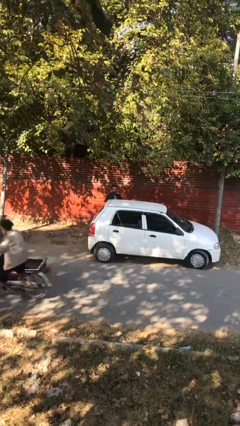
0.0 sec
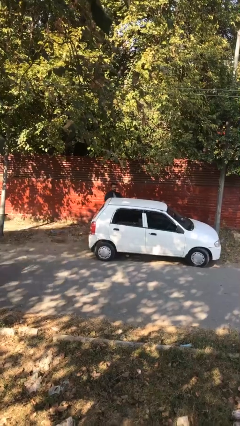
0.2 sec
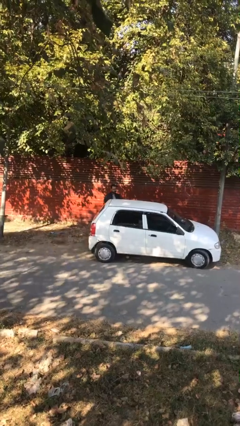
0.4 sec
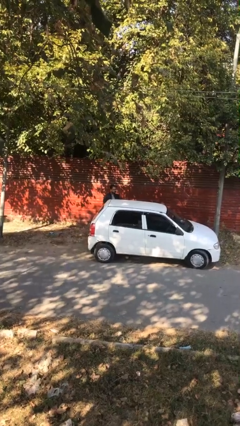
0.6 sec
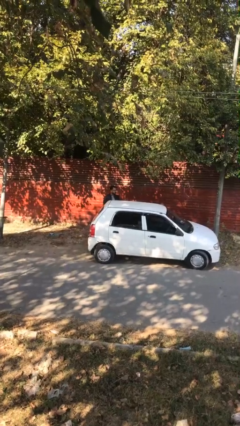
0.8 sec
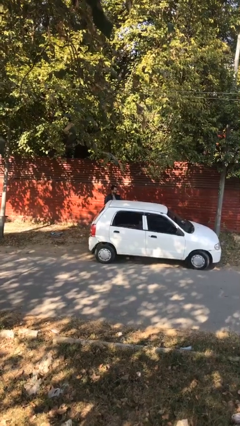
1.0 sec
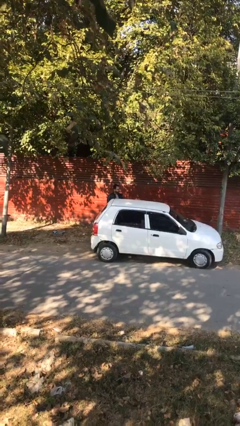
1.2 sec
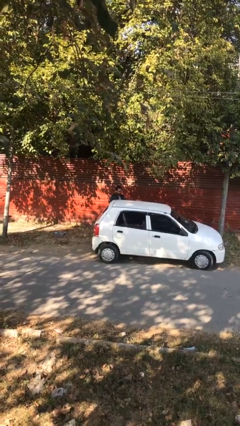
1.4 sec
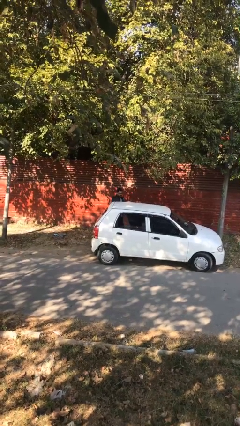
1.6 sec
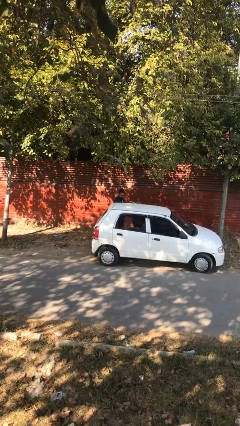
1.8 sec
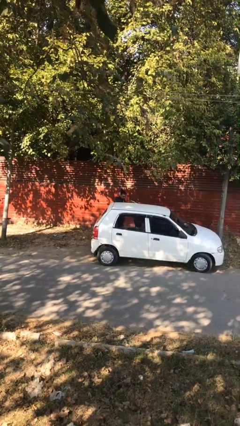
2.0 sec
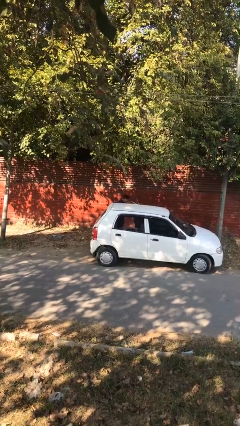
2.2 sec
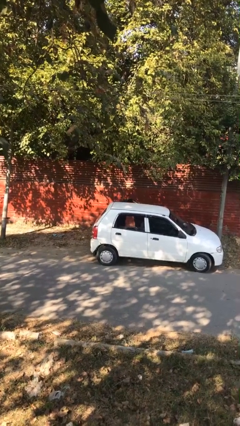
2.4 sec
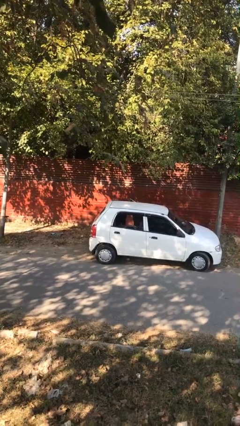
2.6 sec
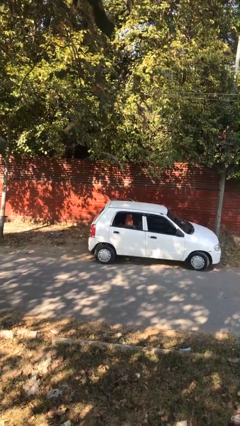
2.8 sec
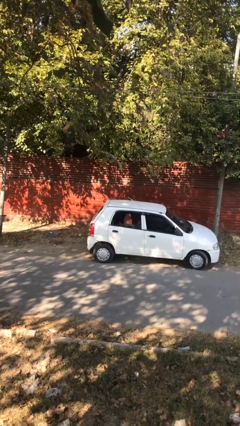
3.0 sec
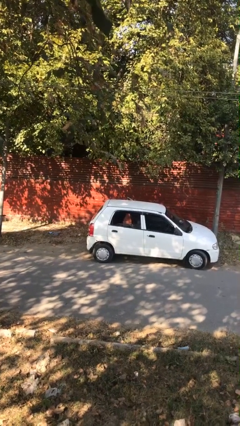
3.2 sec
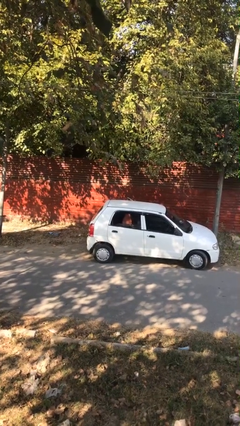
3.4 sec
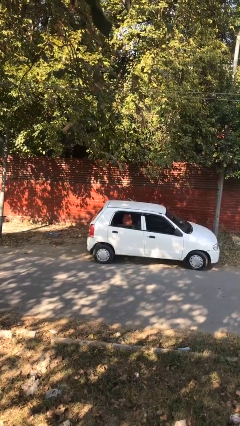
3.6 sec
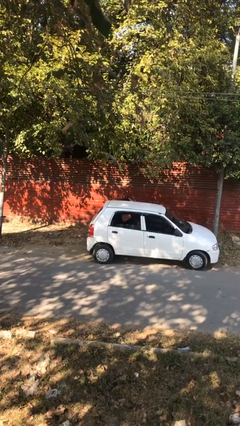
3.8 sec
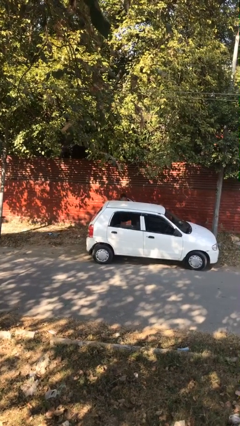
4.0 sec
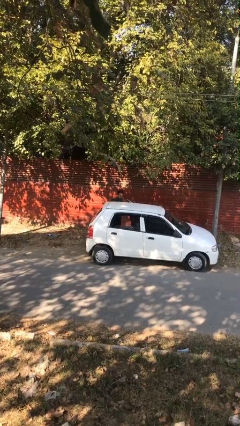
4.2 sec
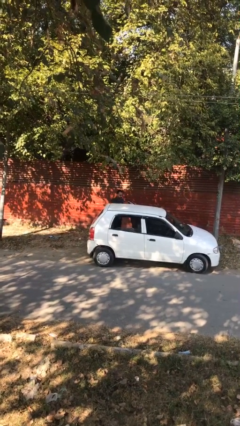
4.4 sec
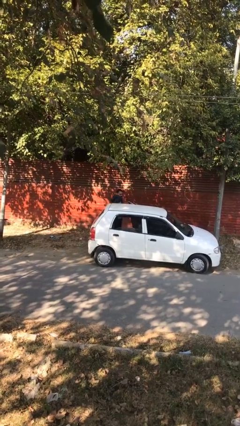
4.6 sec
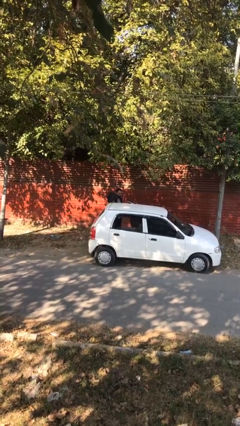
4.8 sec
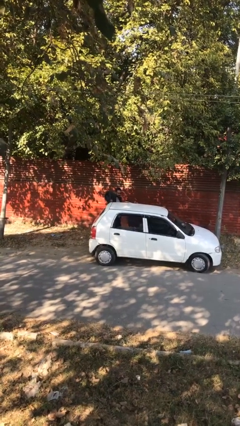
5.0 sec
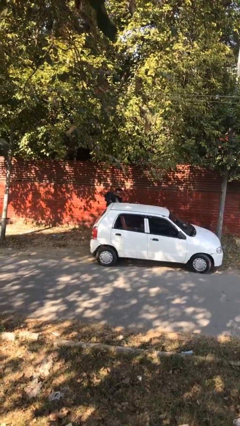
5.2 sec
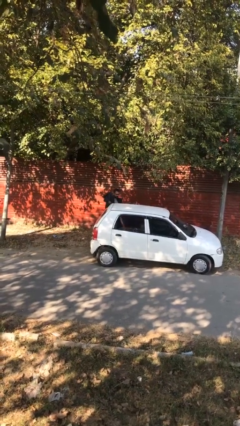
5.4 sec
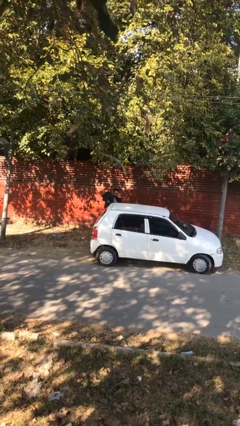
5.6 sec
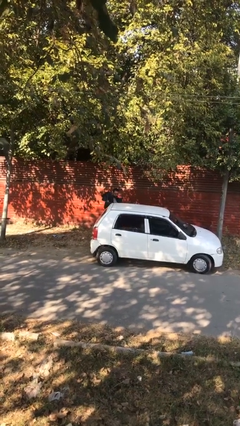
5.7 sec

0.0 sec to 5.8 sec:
person unloads car

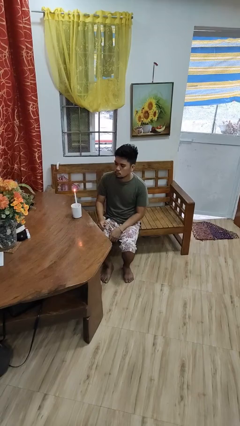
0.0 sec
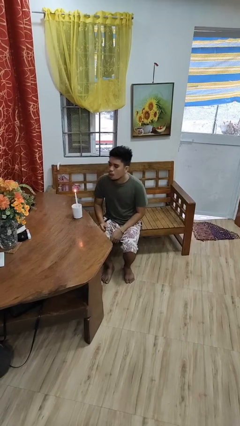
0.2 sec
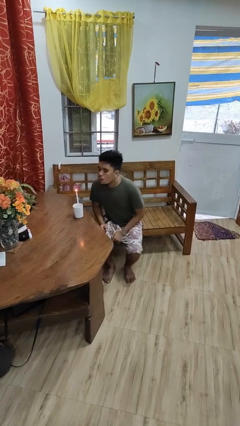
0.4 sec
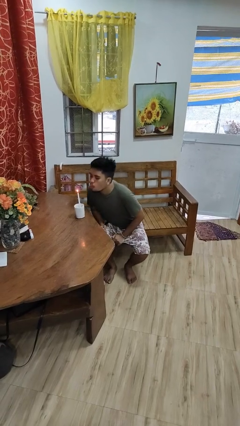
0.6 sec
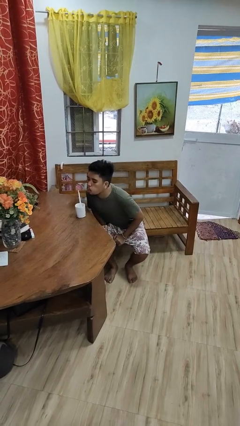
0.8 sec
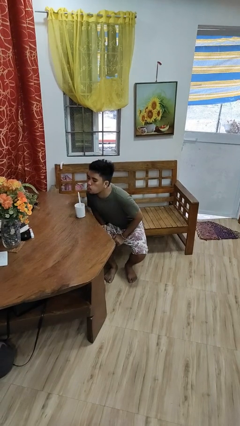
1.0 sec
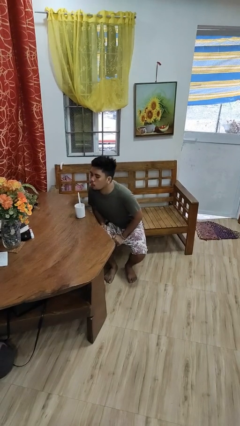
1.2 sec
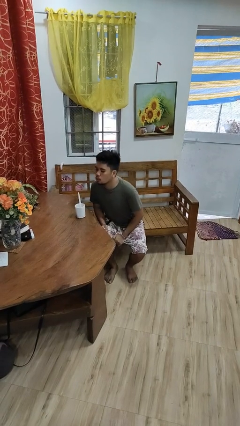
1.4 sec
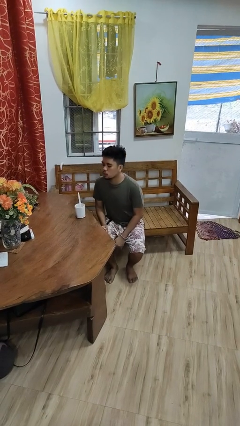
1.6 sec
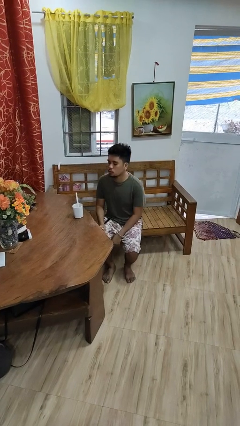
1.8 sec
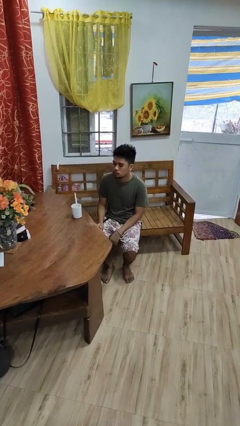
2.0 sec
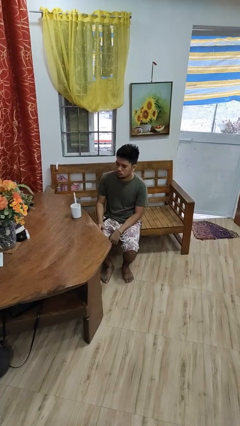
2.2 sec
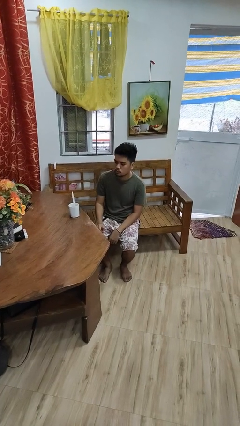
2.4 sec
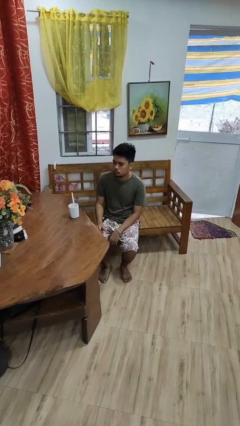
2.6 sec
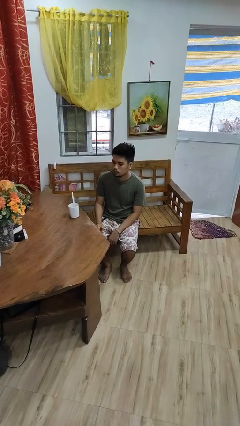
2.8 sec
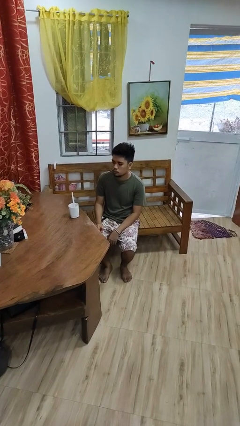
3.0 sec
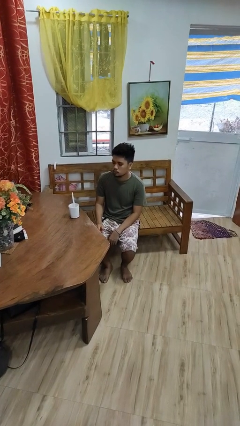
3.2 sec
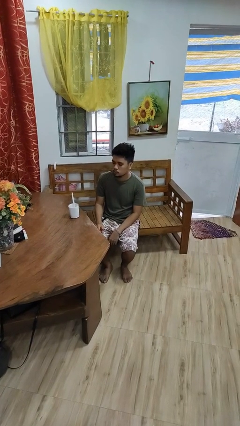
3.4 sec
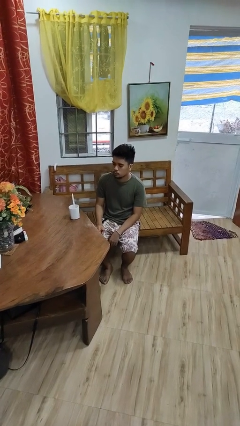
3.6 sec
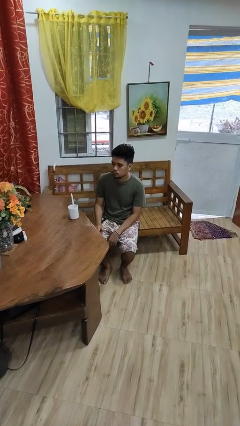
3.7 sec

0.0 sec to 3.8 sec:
person extinguishes candle

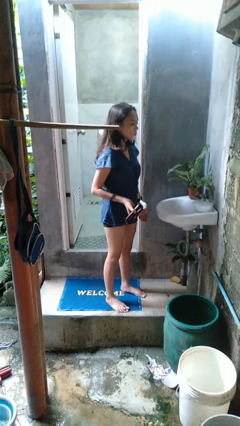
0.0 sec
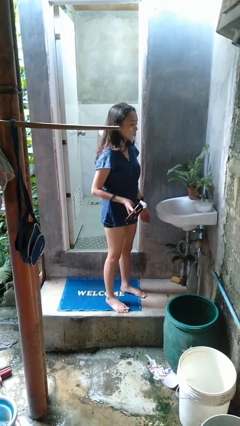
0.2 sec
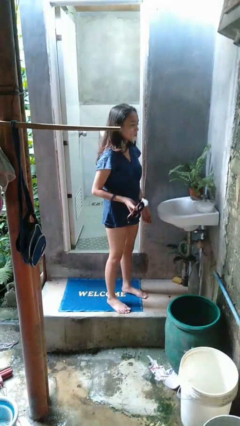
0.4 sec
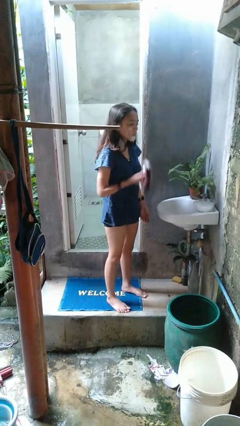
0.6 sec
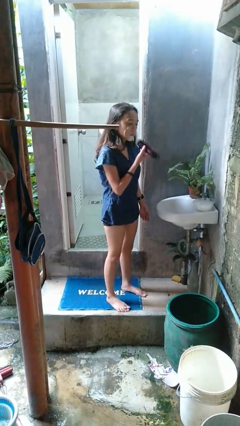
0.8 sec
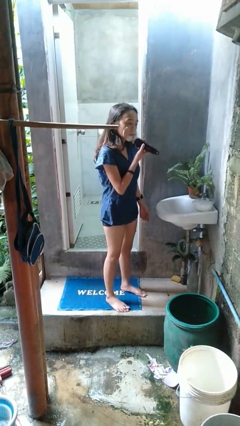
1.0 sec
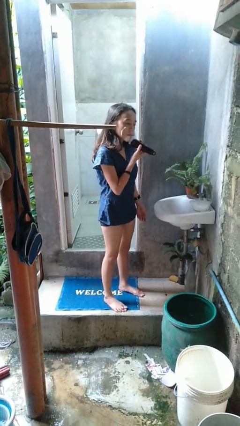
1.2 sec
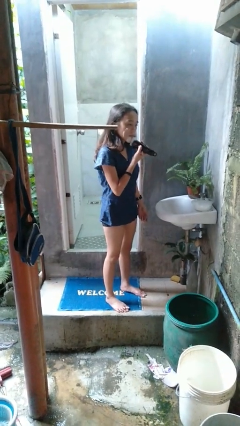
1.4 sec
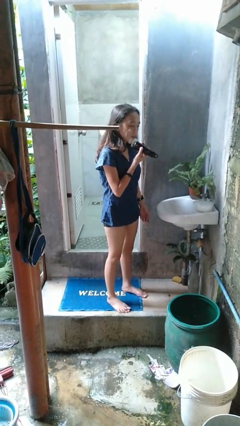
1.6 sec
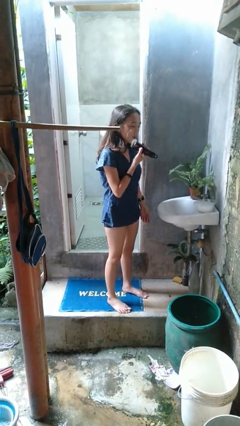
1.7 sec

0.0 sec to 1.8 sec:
person shaves face

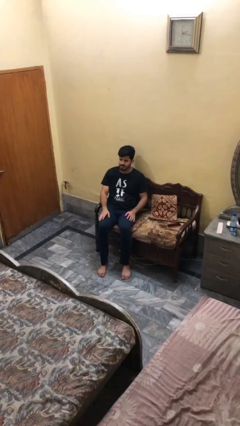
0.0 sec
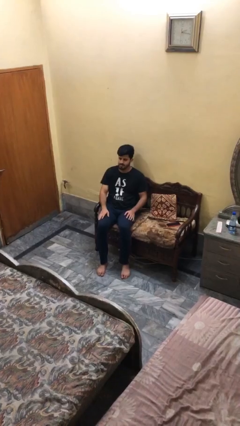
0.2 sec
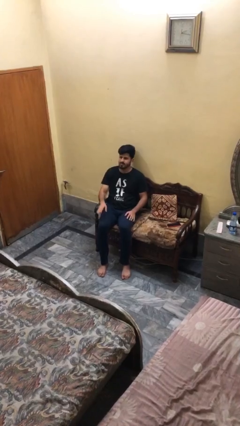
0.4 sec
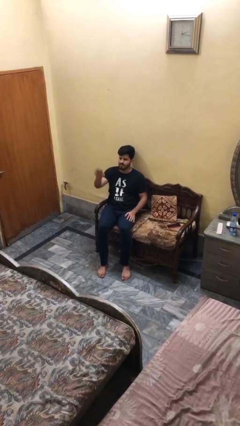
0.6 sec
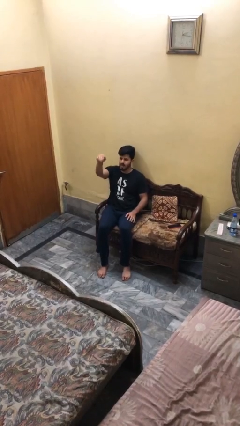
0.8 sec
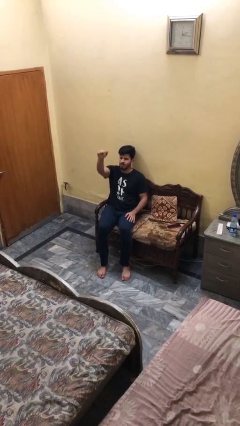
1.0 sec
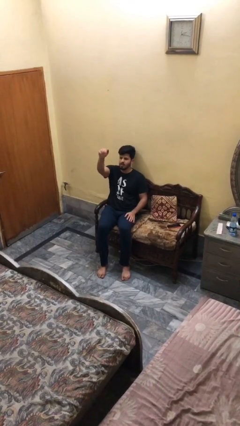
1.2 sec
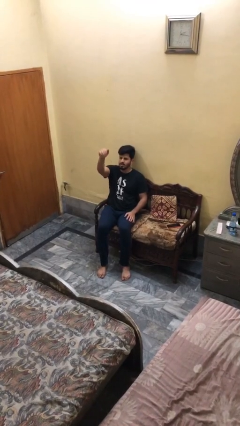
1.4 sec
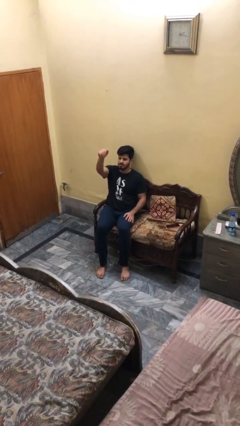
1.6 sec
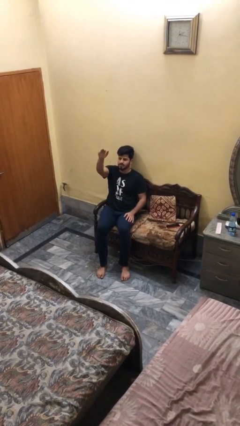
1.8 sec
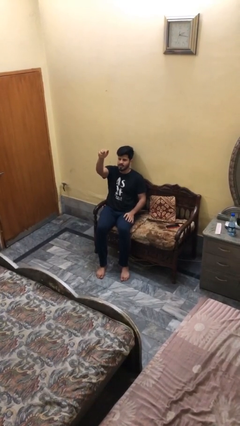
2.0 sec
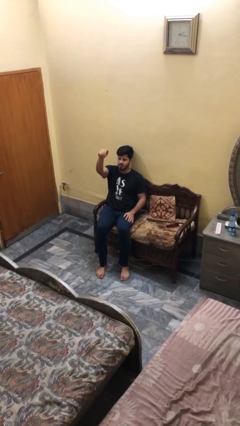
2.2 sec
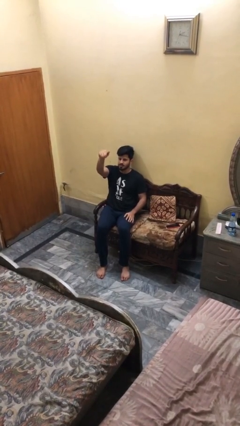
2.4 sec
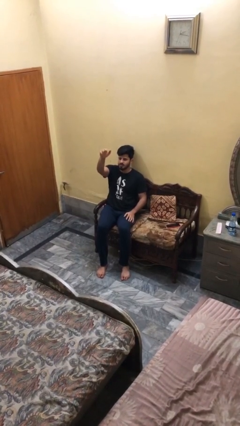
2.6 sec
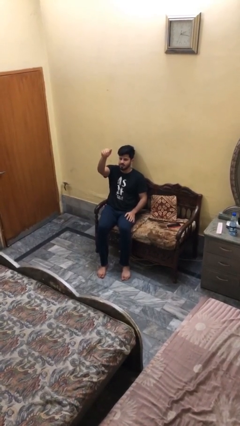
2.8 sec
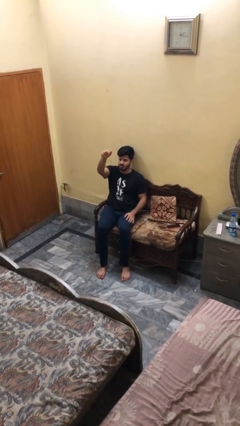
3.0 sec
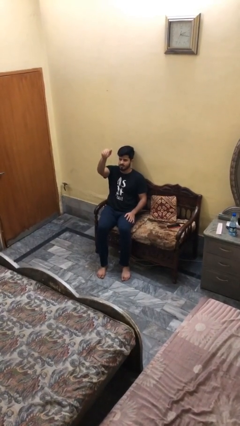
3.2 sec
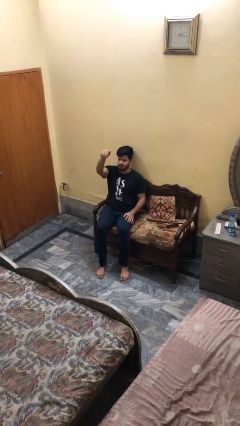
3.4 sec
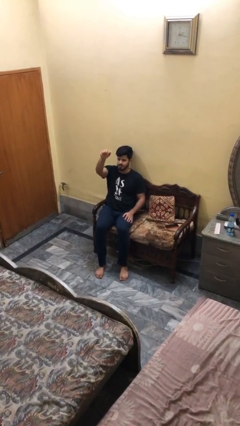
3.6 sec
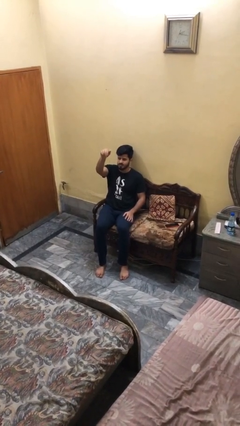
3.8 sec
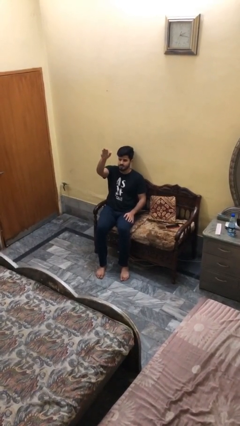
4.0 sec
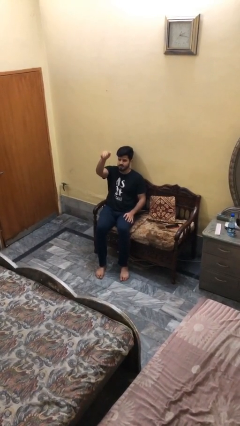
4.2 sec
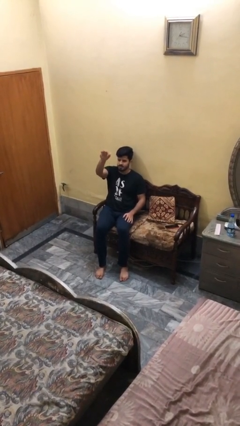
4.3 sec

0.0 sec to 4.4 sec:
person gestures come here

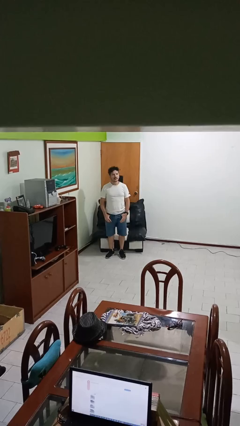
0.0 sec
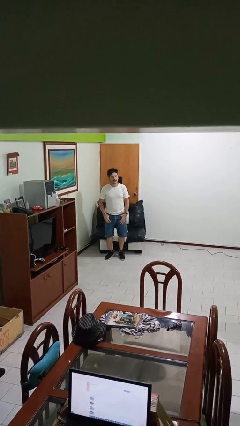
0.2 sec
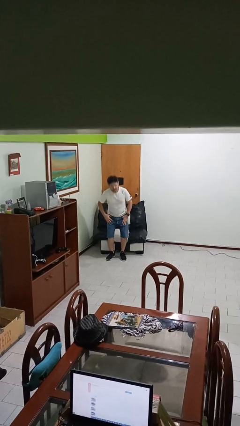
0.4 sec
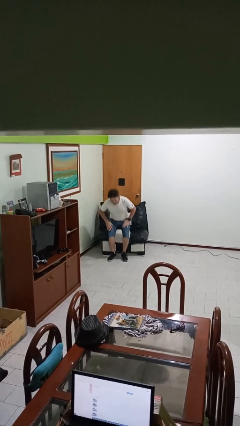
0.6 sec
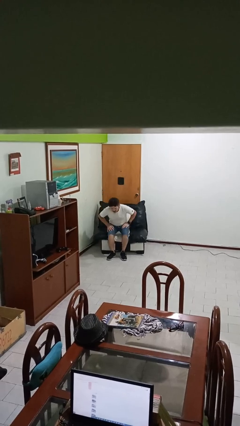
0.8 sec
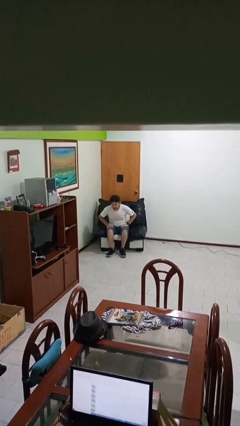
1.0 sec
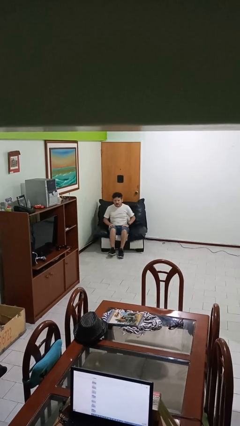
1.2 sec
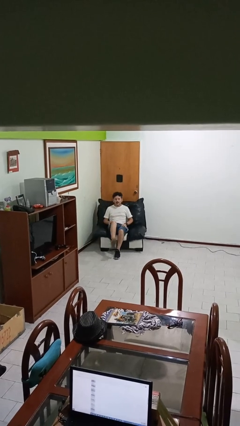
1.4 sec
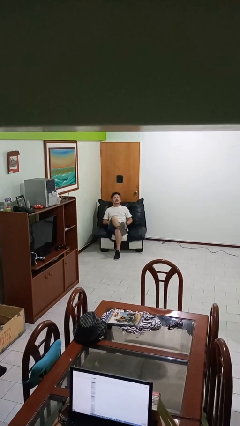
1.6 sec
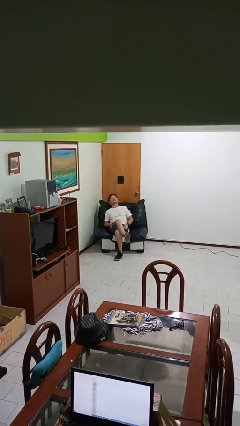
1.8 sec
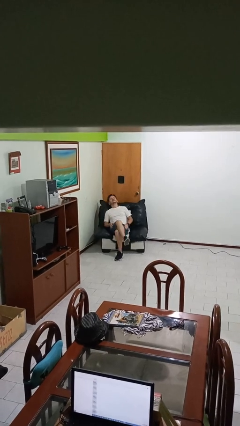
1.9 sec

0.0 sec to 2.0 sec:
person lies down on couch

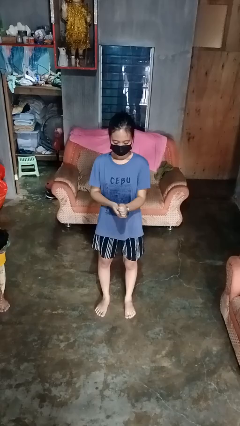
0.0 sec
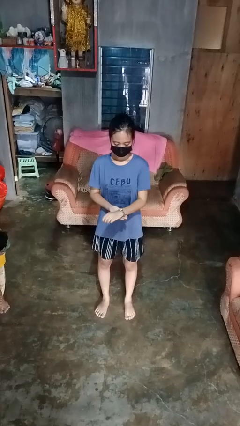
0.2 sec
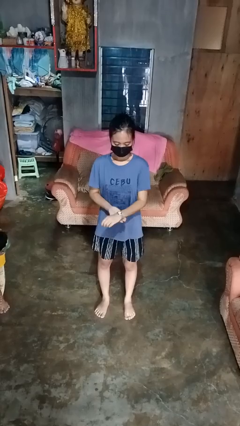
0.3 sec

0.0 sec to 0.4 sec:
person puts on wristwatch
